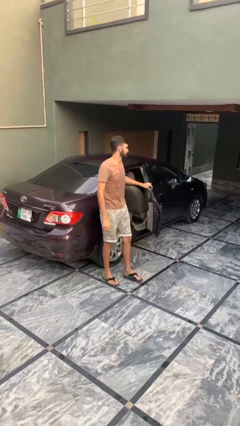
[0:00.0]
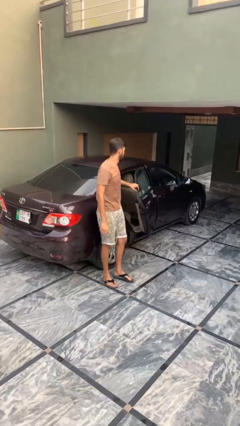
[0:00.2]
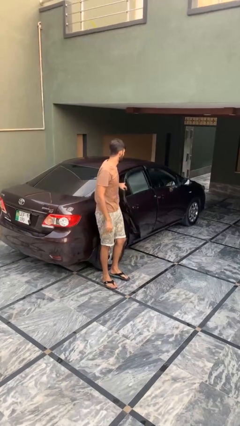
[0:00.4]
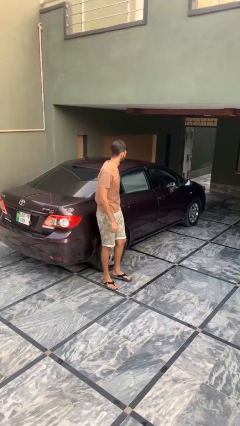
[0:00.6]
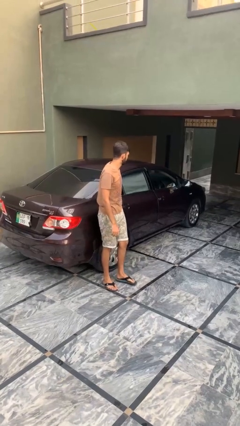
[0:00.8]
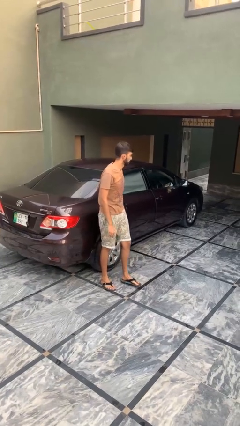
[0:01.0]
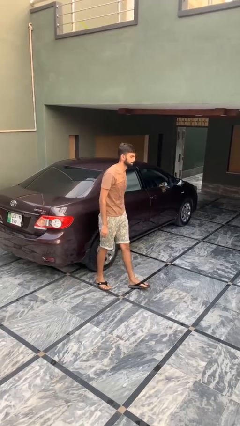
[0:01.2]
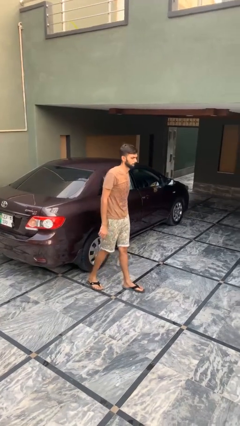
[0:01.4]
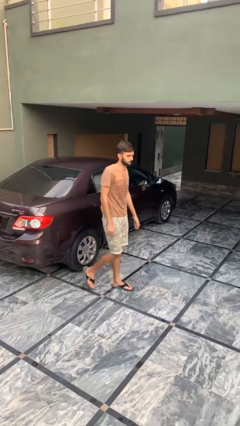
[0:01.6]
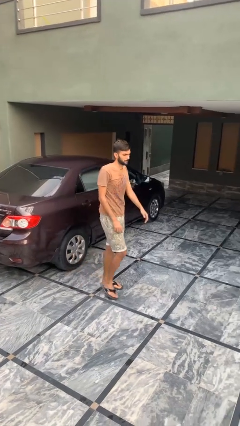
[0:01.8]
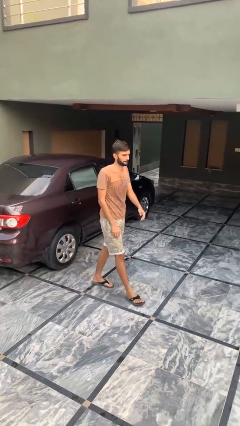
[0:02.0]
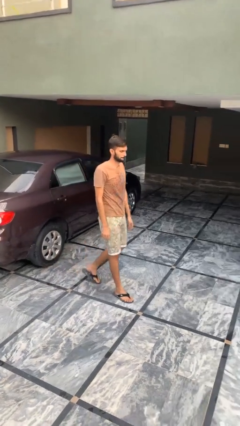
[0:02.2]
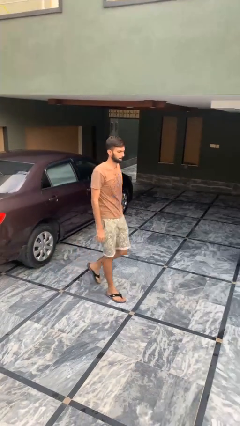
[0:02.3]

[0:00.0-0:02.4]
person closes car door

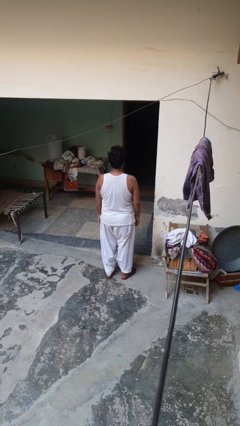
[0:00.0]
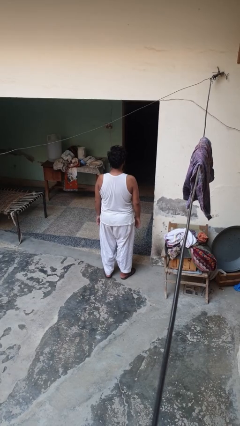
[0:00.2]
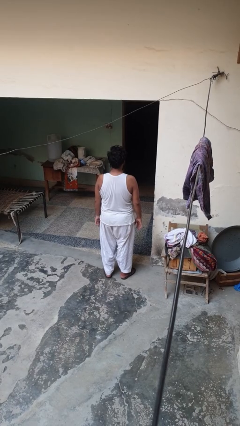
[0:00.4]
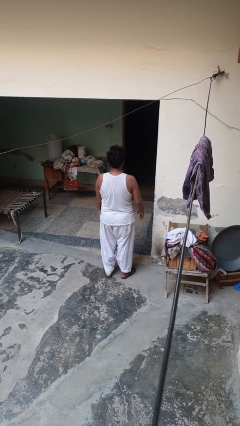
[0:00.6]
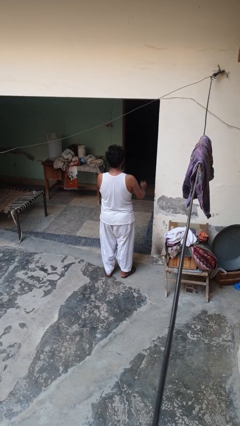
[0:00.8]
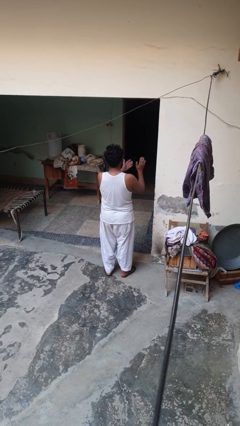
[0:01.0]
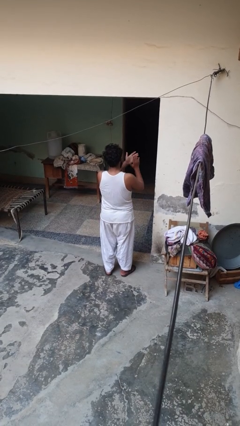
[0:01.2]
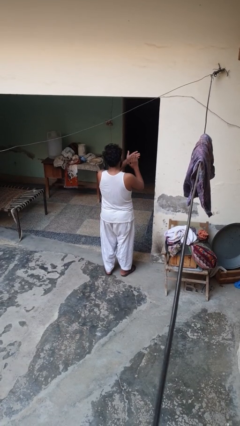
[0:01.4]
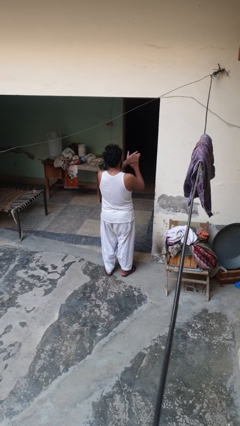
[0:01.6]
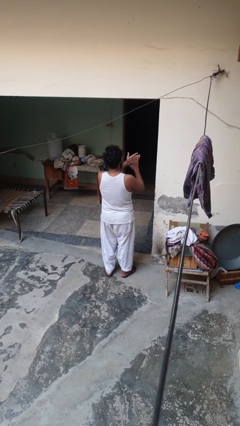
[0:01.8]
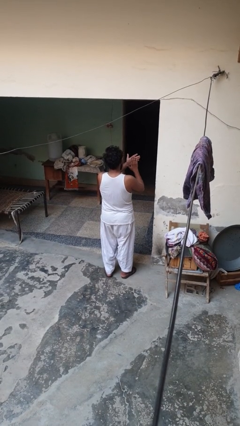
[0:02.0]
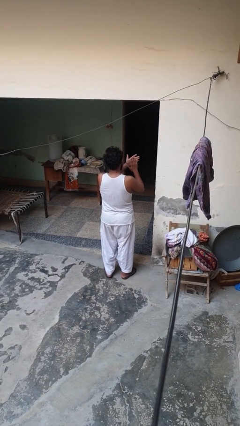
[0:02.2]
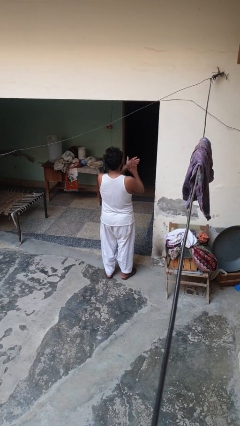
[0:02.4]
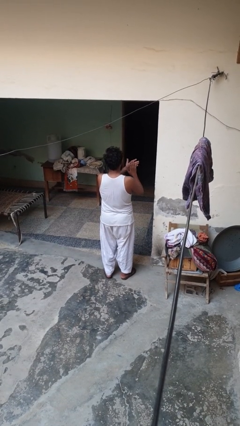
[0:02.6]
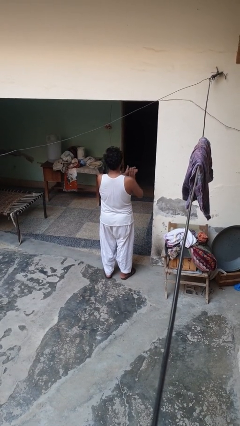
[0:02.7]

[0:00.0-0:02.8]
person claps hands

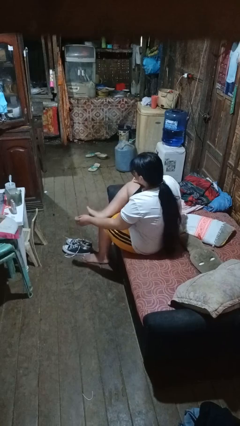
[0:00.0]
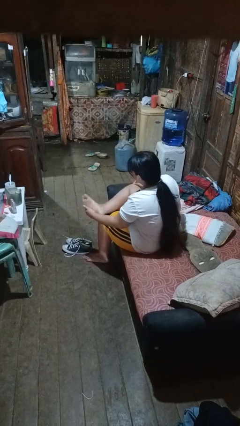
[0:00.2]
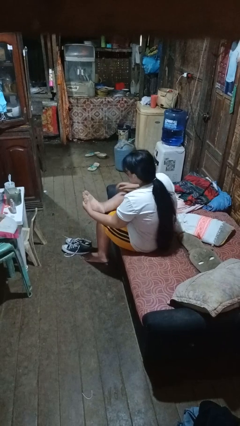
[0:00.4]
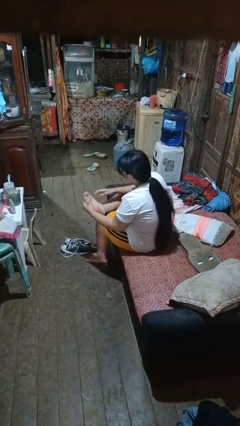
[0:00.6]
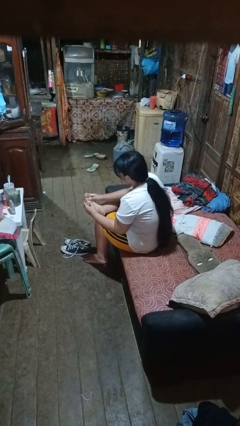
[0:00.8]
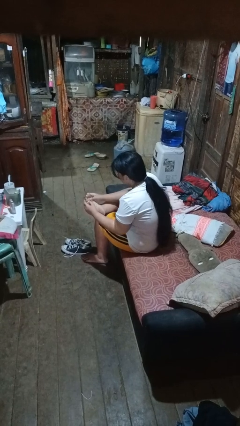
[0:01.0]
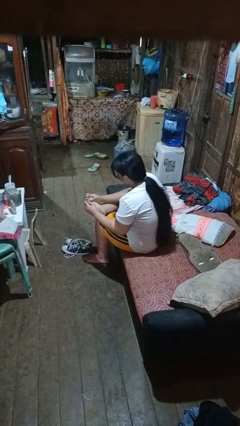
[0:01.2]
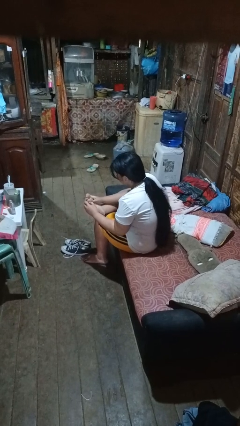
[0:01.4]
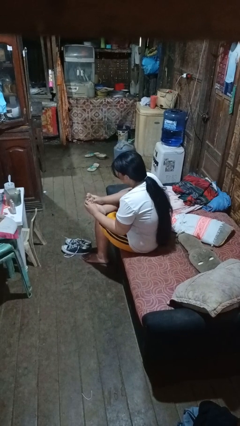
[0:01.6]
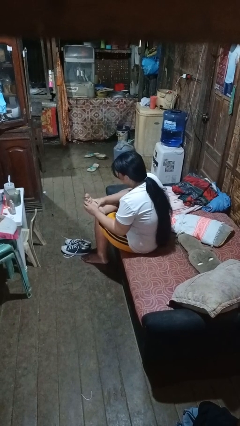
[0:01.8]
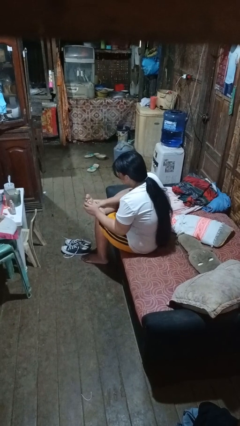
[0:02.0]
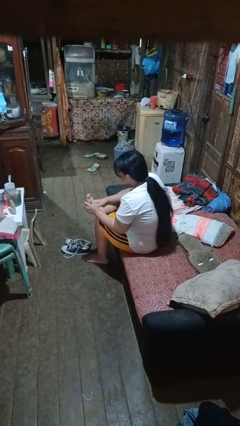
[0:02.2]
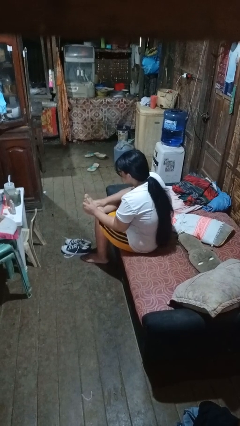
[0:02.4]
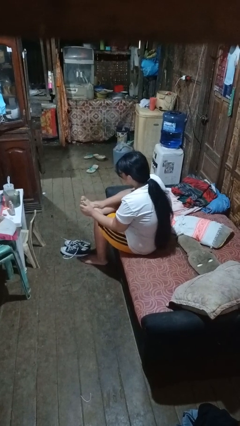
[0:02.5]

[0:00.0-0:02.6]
person rubs foot

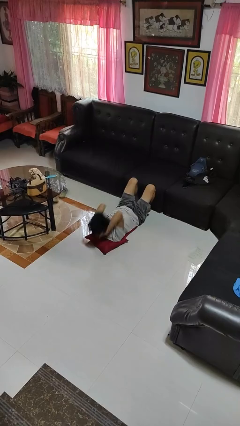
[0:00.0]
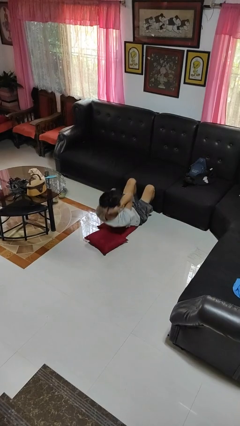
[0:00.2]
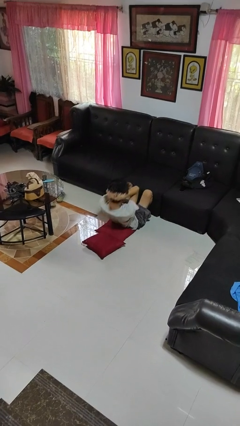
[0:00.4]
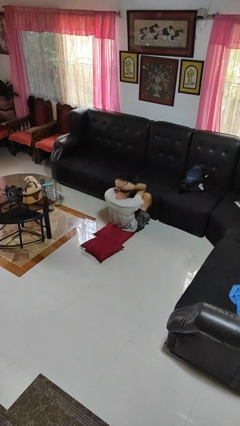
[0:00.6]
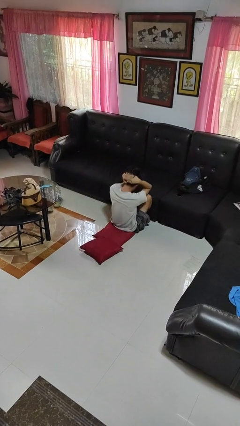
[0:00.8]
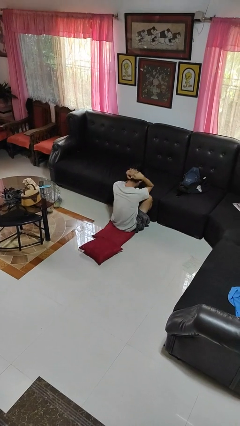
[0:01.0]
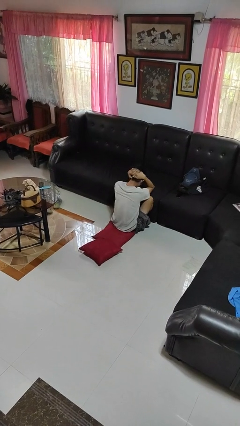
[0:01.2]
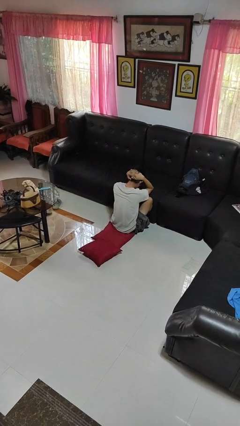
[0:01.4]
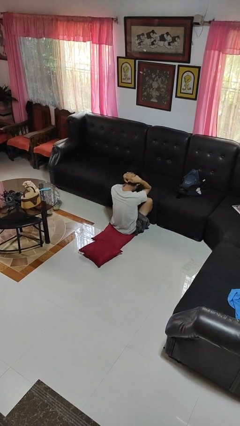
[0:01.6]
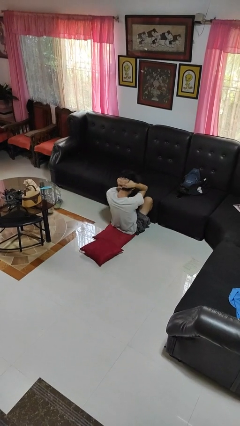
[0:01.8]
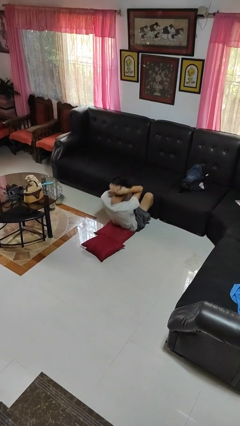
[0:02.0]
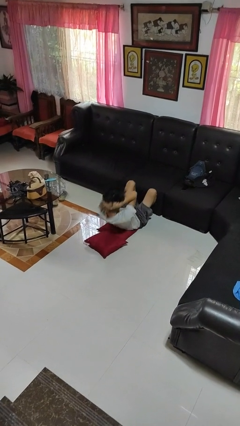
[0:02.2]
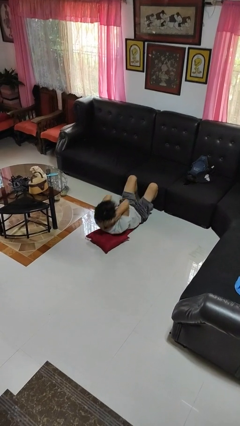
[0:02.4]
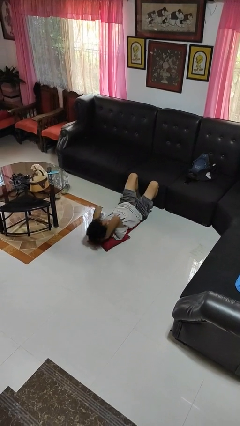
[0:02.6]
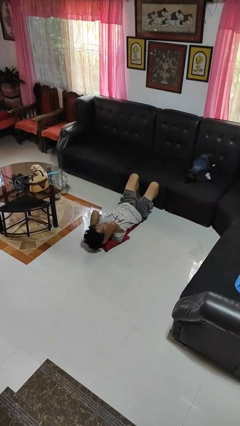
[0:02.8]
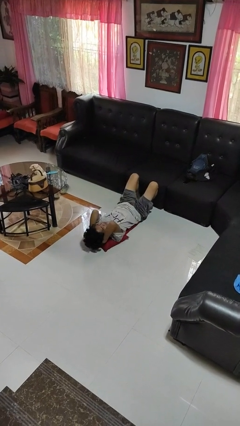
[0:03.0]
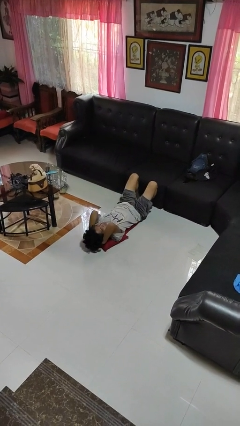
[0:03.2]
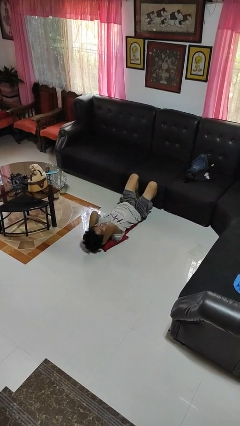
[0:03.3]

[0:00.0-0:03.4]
person exercises with situp

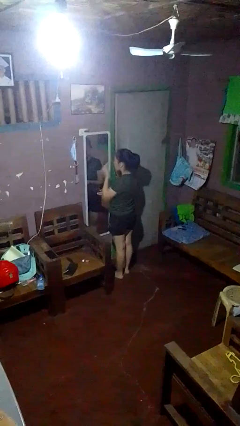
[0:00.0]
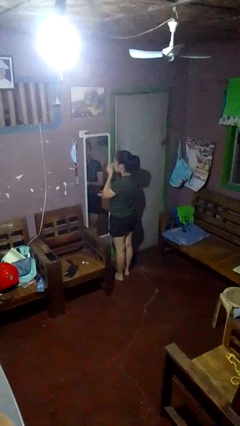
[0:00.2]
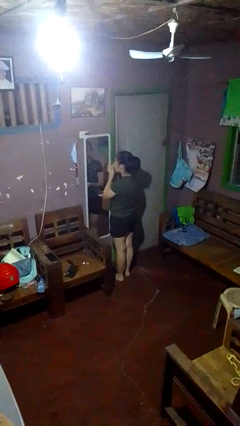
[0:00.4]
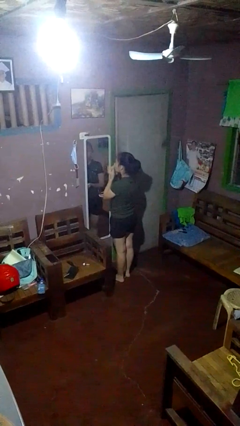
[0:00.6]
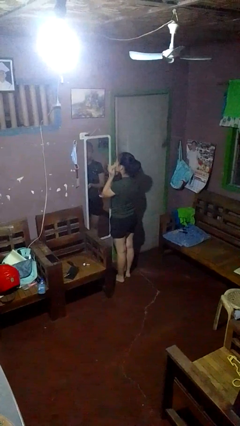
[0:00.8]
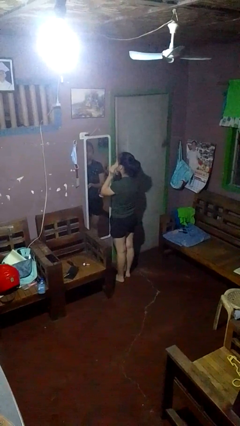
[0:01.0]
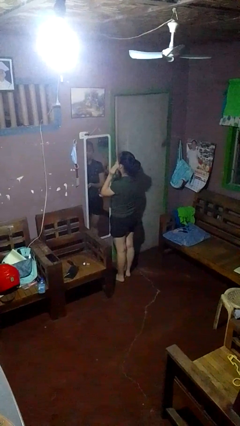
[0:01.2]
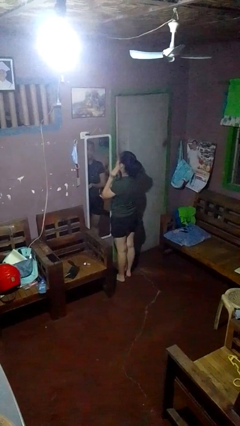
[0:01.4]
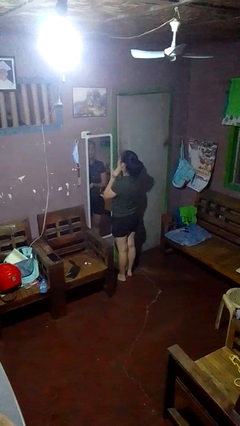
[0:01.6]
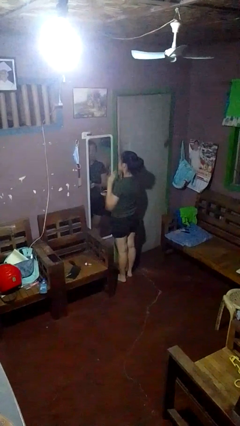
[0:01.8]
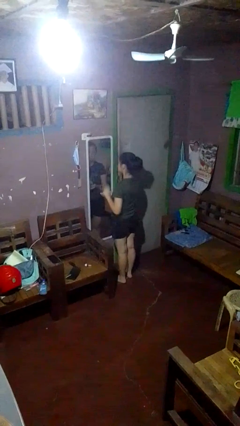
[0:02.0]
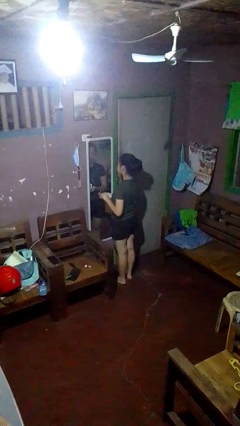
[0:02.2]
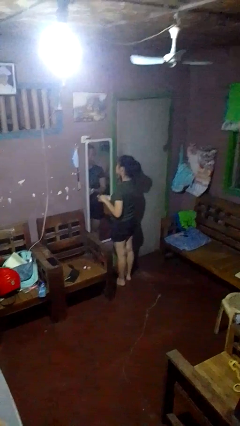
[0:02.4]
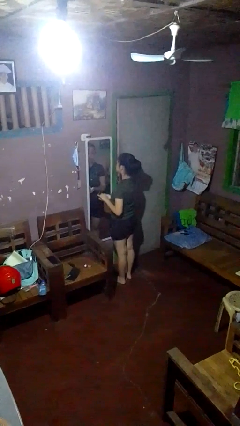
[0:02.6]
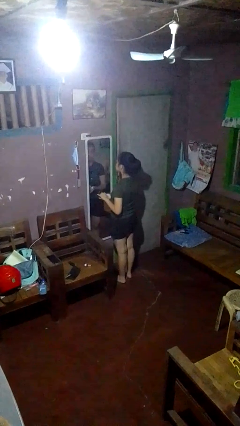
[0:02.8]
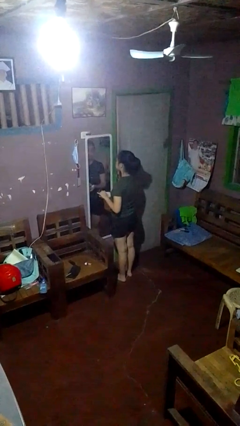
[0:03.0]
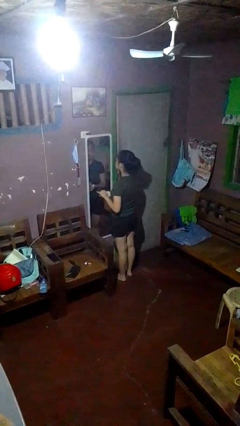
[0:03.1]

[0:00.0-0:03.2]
person applies foundation makeup

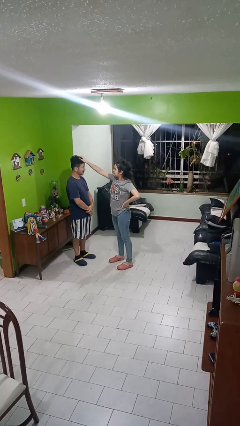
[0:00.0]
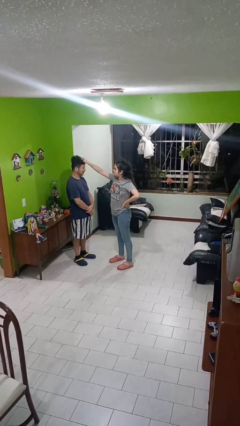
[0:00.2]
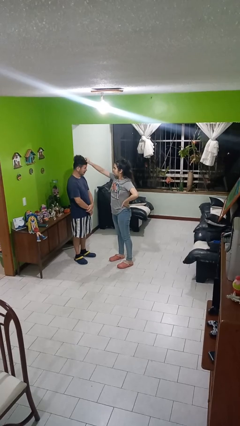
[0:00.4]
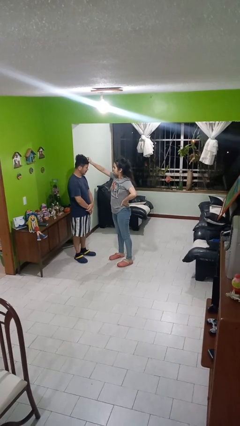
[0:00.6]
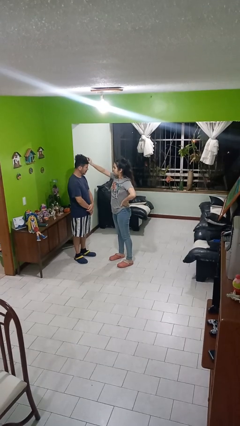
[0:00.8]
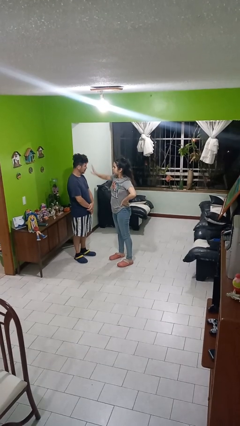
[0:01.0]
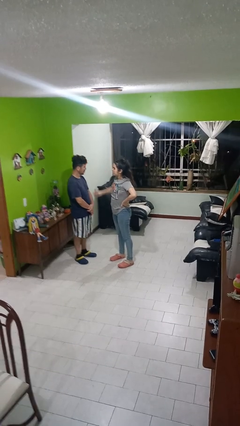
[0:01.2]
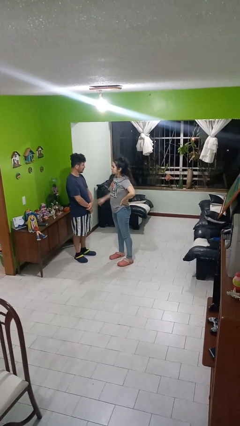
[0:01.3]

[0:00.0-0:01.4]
person grabs person by hair

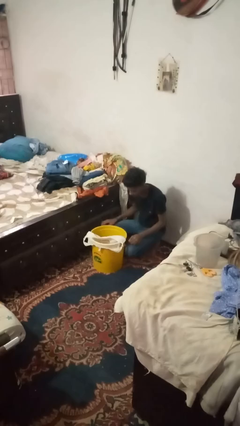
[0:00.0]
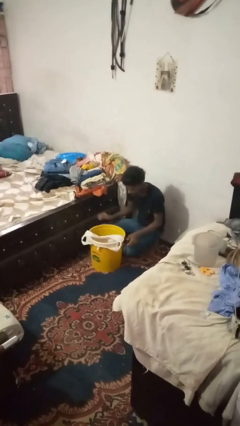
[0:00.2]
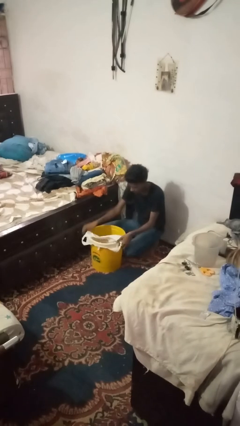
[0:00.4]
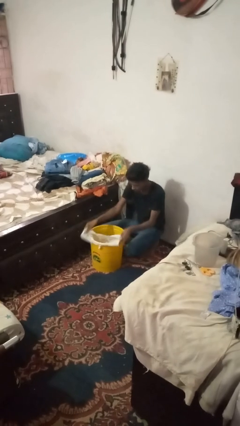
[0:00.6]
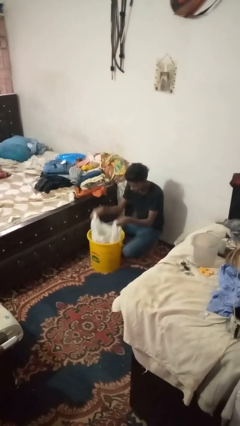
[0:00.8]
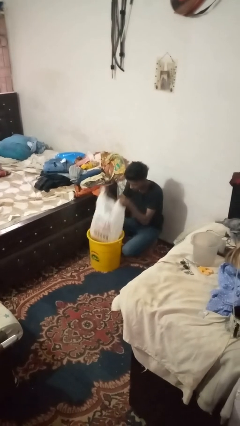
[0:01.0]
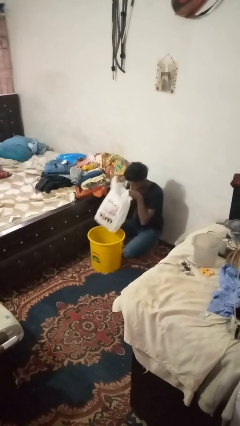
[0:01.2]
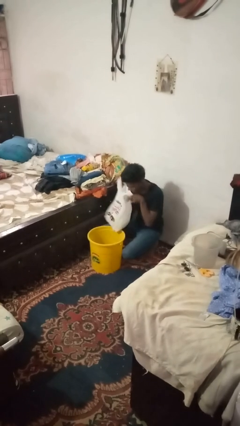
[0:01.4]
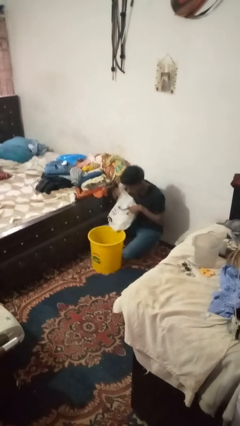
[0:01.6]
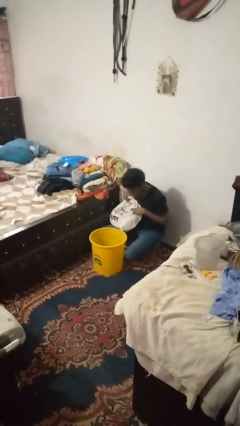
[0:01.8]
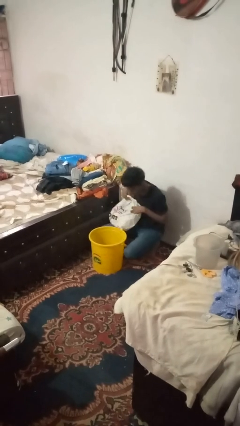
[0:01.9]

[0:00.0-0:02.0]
person removes trashbag from trashcan
